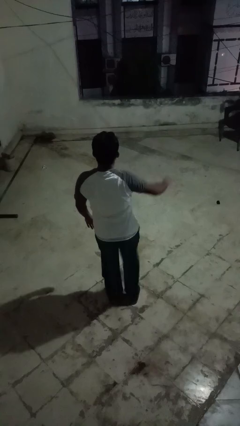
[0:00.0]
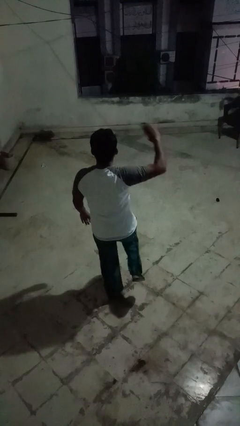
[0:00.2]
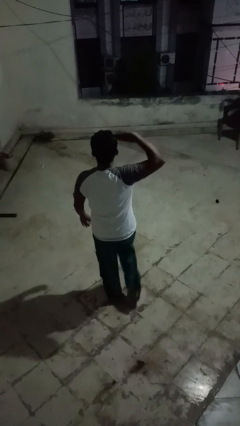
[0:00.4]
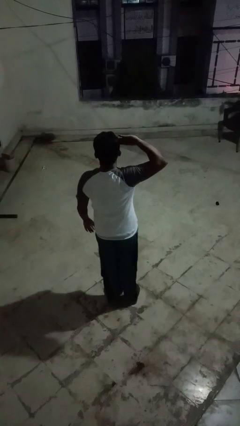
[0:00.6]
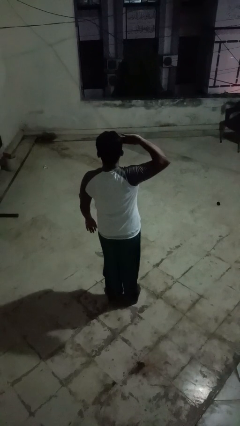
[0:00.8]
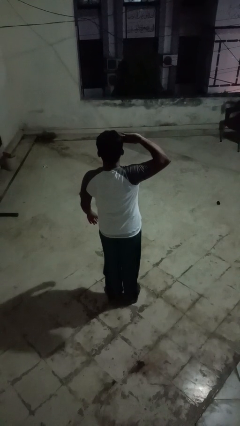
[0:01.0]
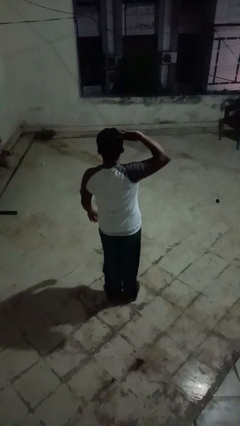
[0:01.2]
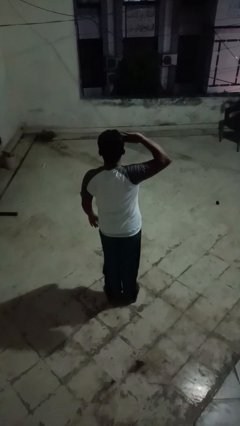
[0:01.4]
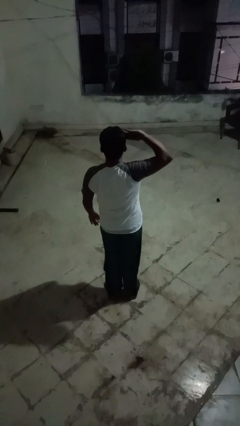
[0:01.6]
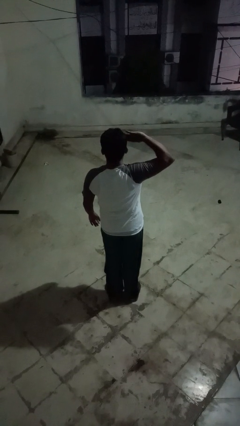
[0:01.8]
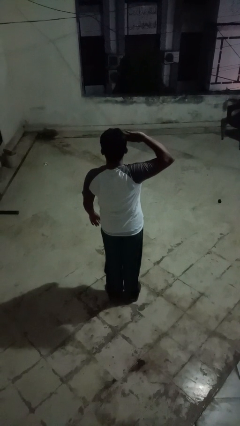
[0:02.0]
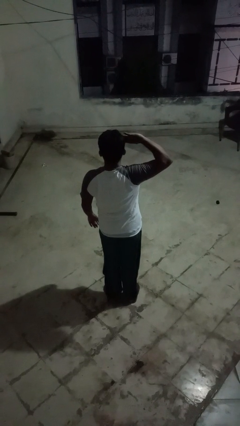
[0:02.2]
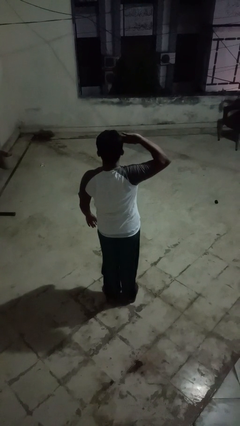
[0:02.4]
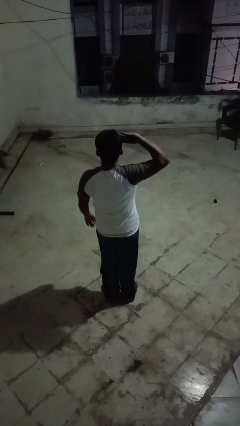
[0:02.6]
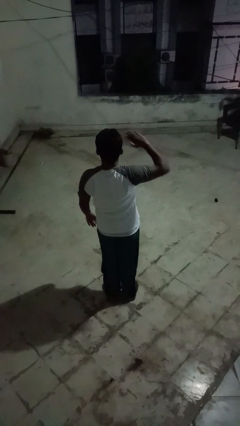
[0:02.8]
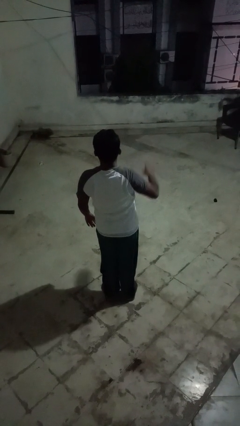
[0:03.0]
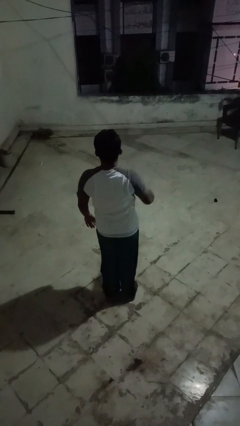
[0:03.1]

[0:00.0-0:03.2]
person salutes

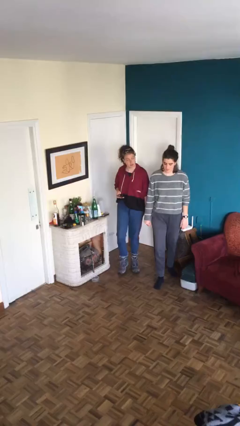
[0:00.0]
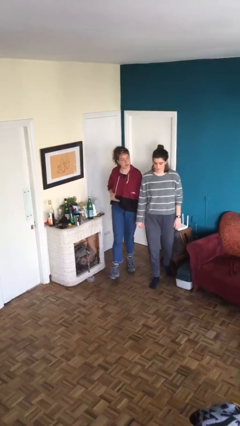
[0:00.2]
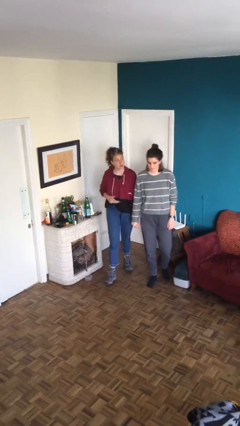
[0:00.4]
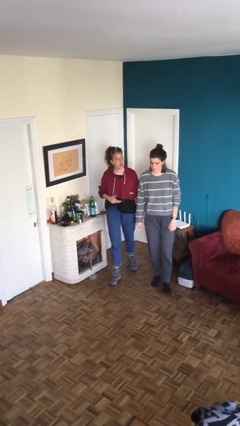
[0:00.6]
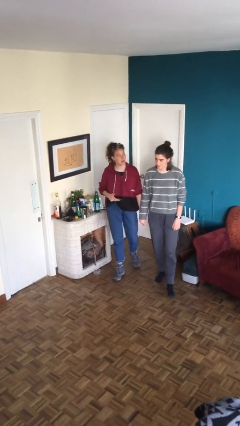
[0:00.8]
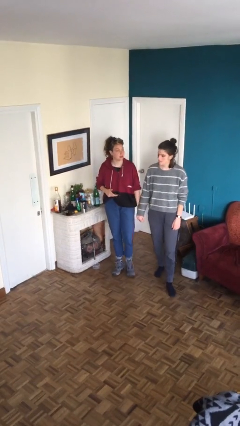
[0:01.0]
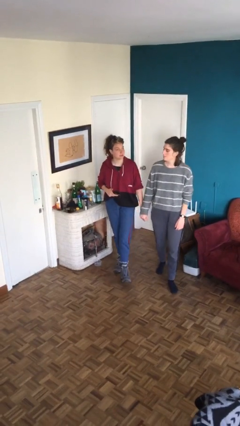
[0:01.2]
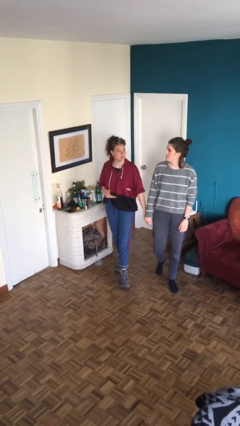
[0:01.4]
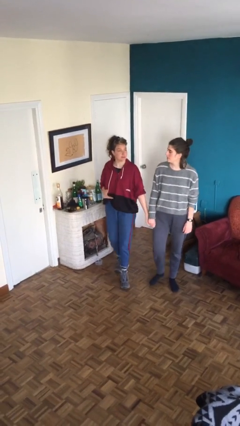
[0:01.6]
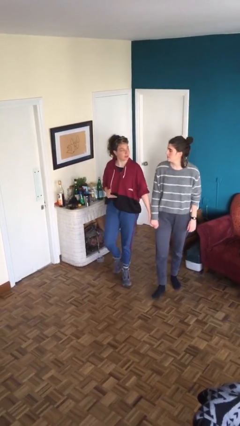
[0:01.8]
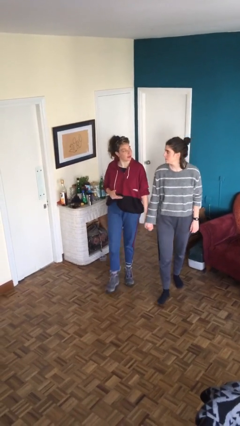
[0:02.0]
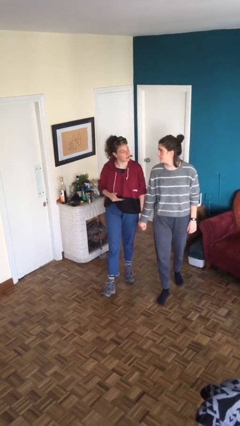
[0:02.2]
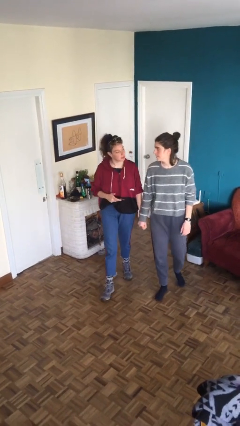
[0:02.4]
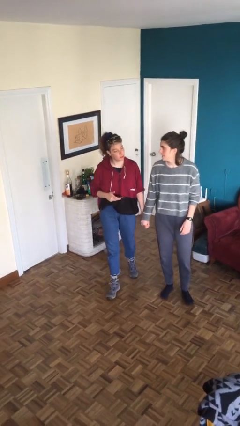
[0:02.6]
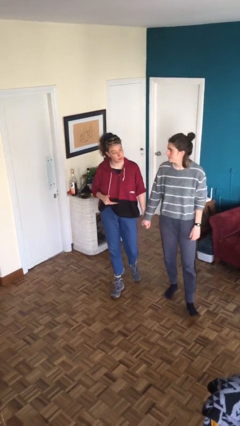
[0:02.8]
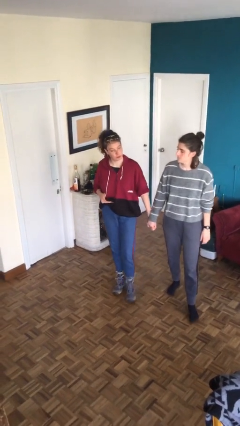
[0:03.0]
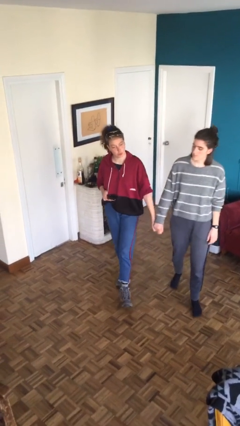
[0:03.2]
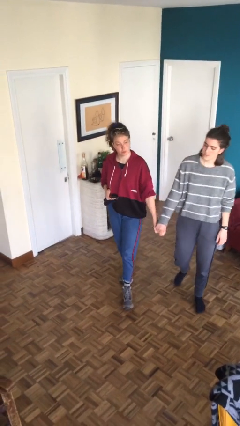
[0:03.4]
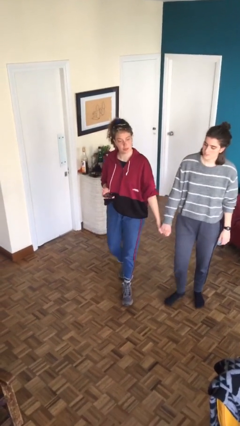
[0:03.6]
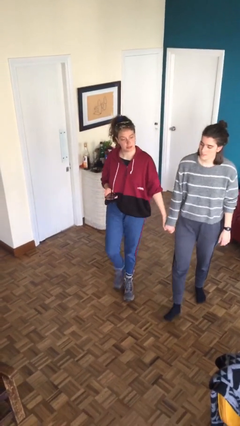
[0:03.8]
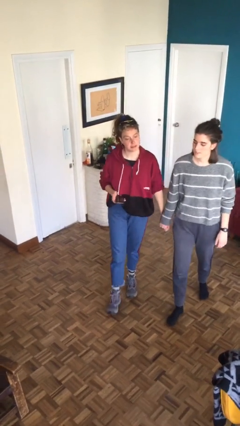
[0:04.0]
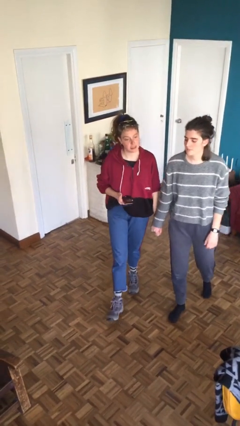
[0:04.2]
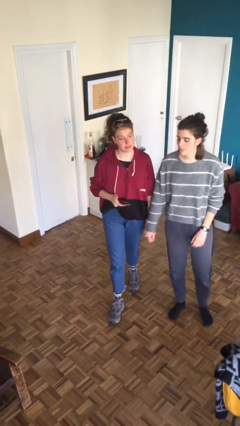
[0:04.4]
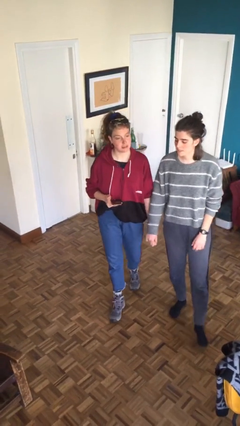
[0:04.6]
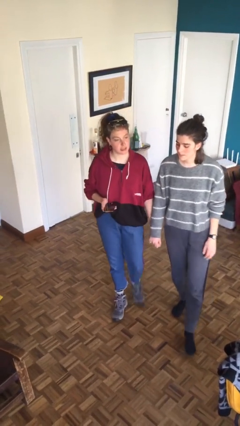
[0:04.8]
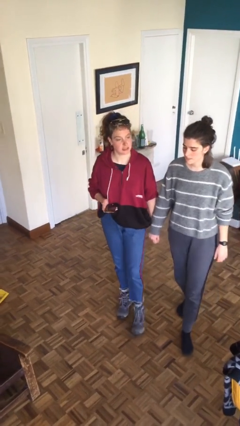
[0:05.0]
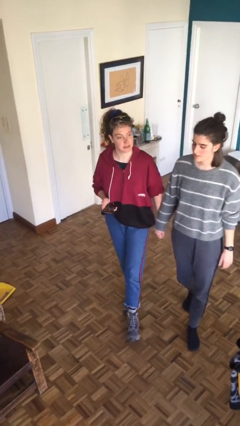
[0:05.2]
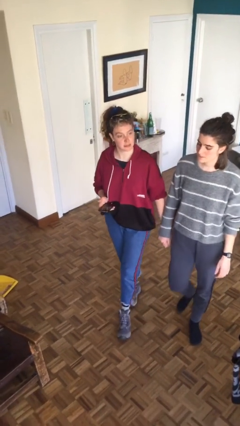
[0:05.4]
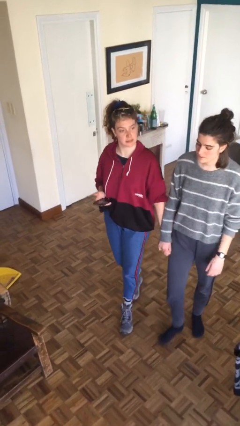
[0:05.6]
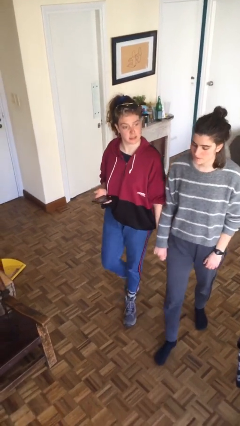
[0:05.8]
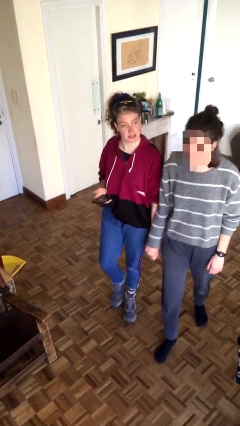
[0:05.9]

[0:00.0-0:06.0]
person holds hand

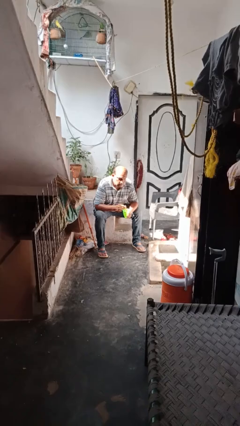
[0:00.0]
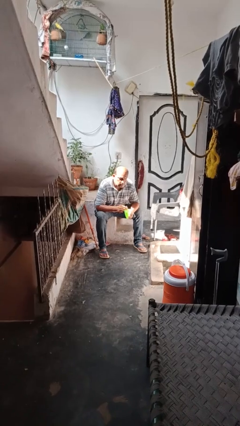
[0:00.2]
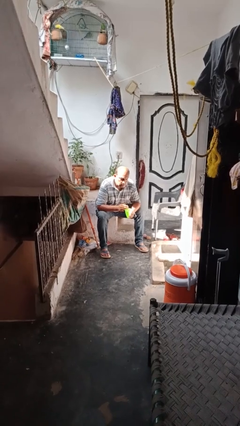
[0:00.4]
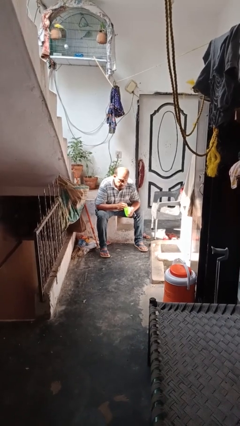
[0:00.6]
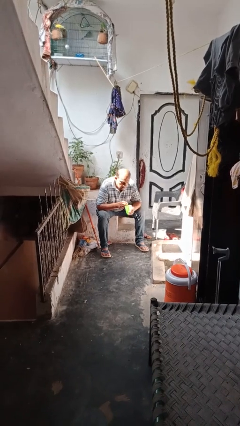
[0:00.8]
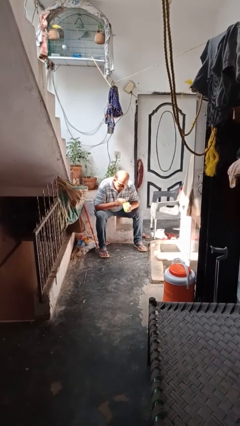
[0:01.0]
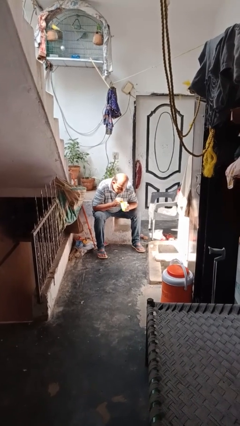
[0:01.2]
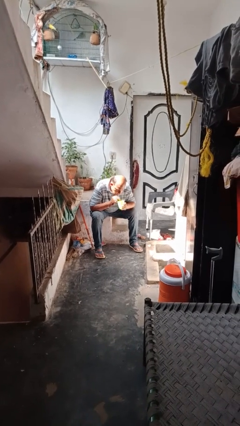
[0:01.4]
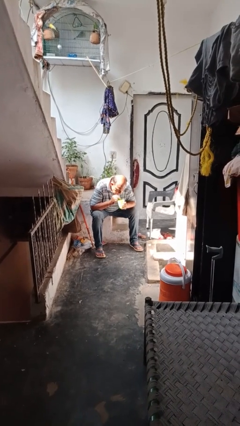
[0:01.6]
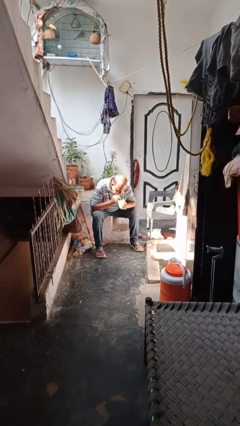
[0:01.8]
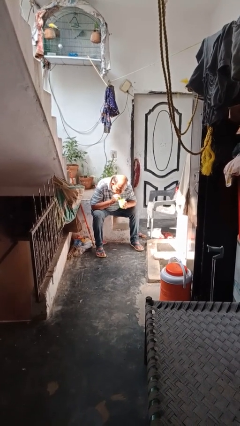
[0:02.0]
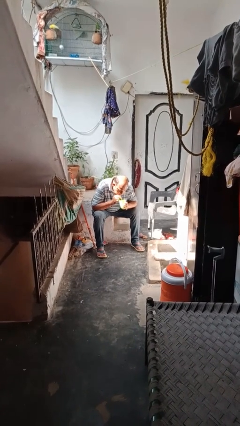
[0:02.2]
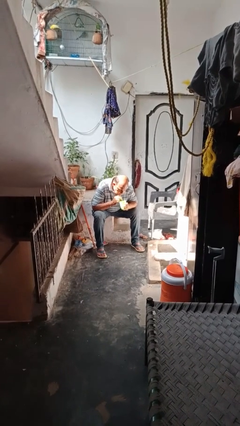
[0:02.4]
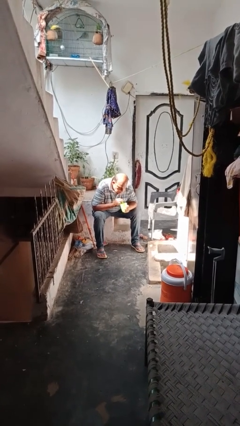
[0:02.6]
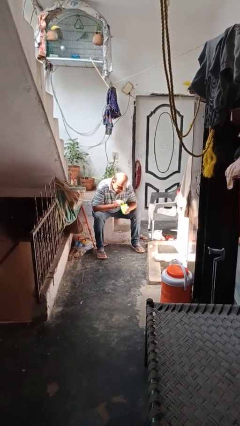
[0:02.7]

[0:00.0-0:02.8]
person drinks from straw

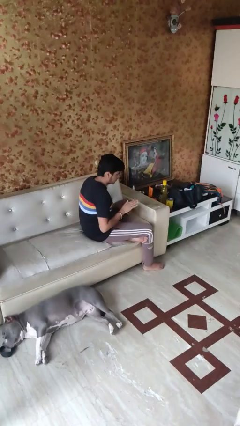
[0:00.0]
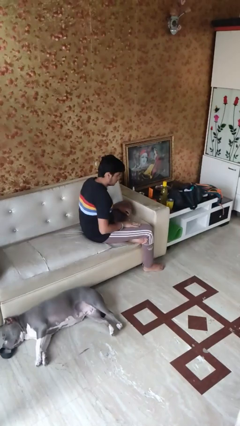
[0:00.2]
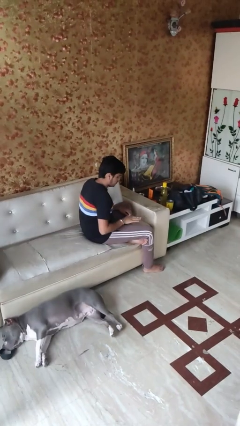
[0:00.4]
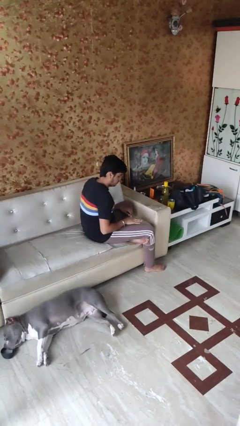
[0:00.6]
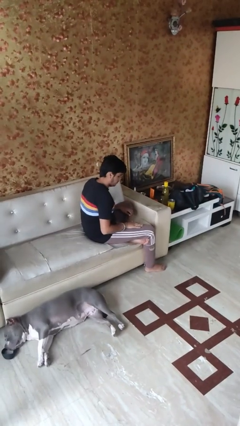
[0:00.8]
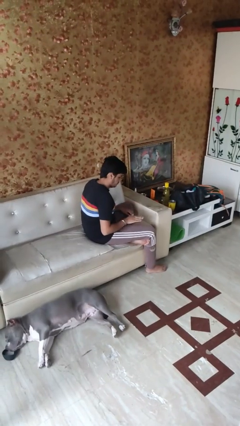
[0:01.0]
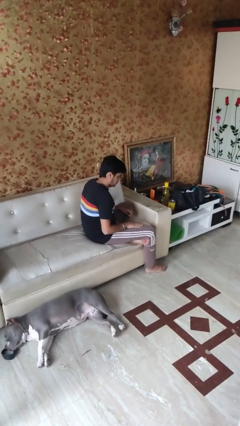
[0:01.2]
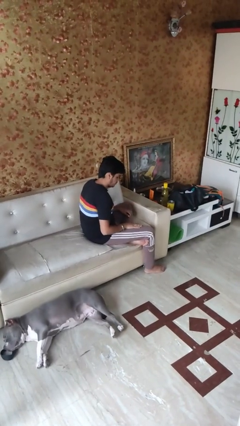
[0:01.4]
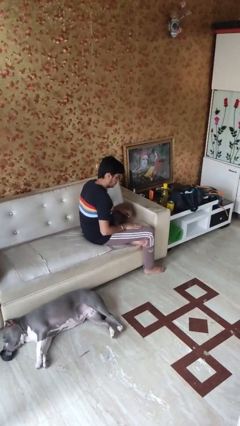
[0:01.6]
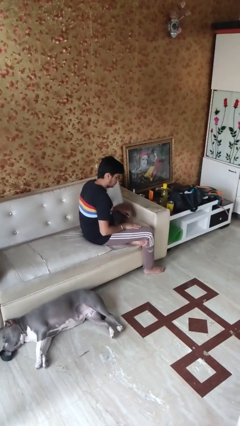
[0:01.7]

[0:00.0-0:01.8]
person slaps hands on thighs

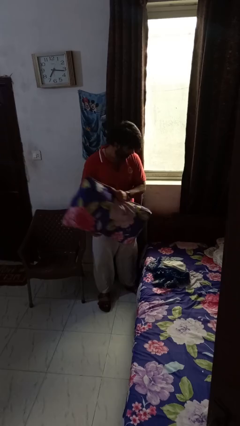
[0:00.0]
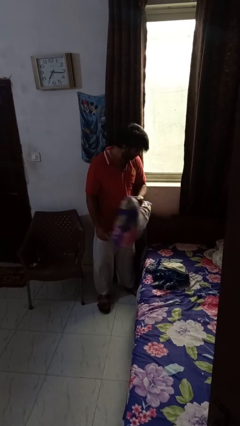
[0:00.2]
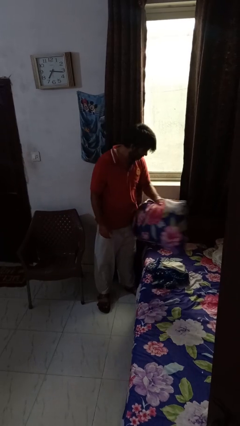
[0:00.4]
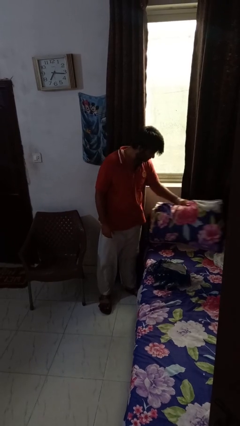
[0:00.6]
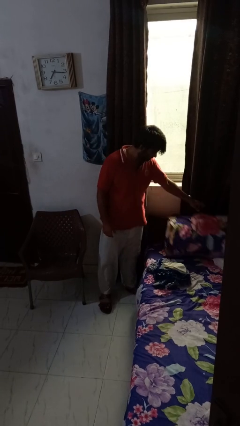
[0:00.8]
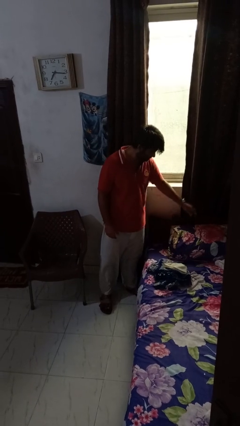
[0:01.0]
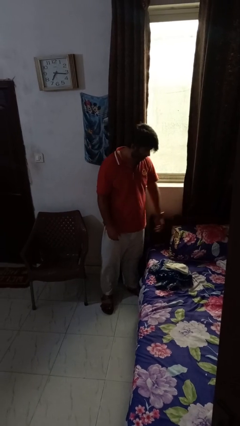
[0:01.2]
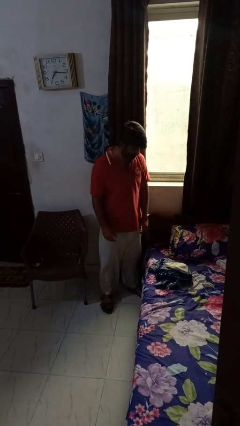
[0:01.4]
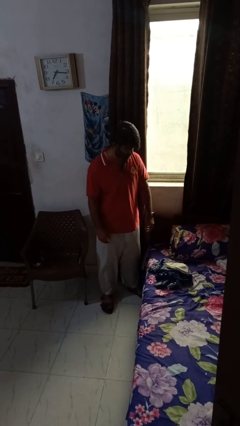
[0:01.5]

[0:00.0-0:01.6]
person puts down object on bed

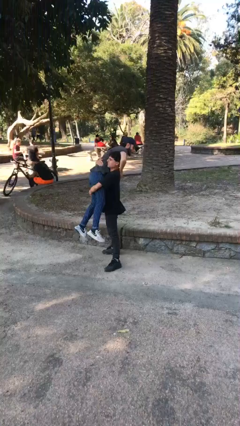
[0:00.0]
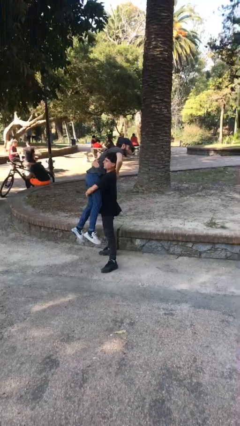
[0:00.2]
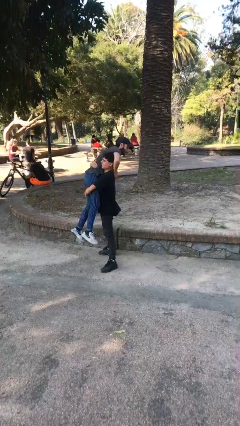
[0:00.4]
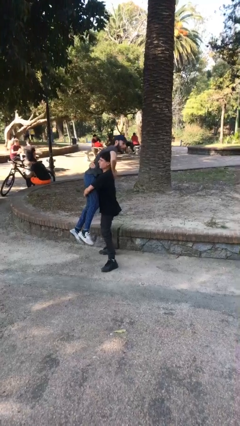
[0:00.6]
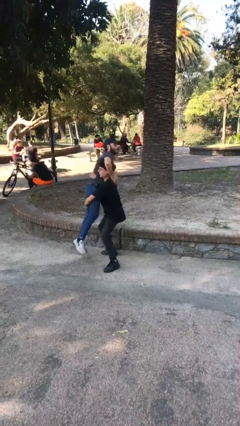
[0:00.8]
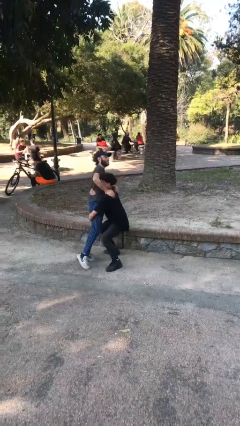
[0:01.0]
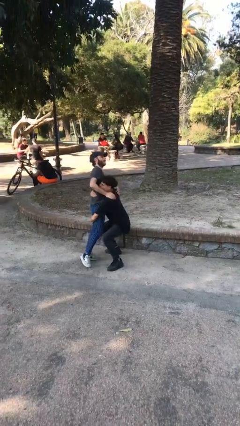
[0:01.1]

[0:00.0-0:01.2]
person puts down person

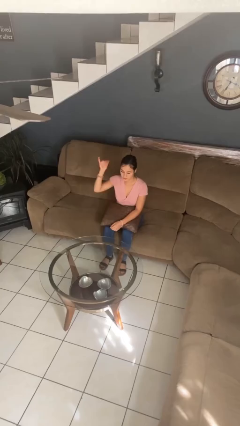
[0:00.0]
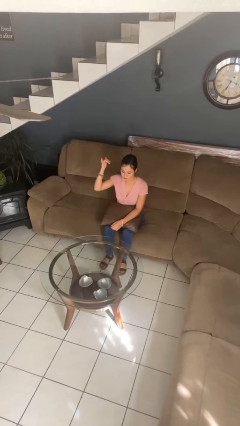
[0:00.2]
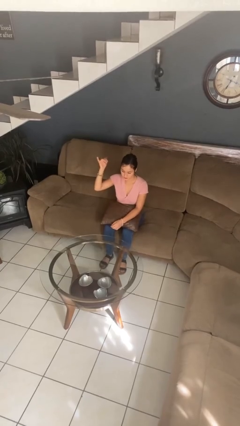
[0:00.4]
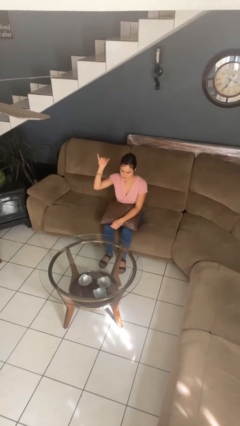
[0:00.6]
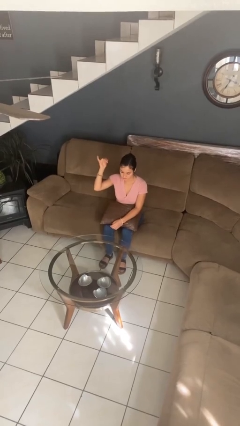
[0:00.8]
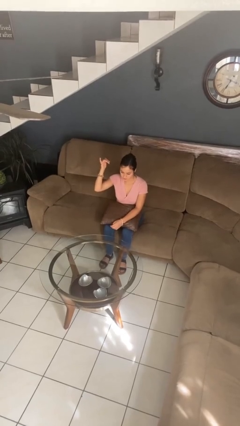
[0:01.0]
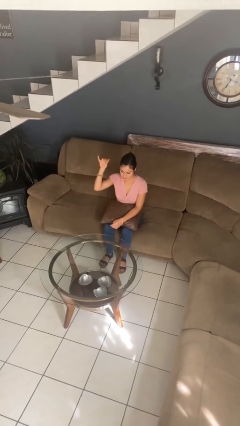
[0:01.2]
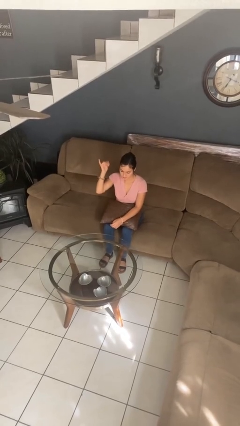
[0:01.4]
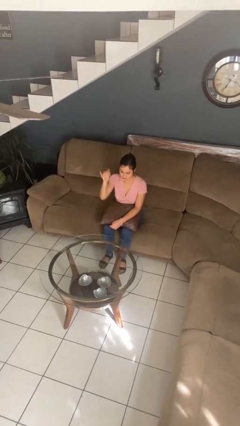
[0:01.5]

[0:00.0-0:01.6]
person gestures hang loose
